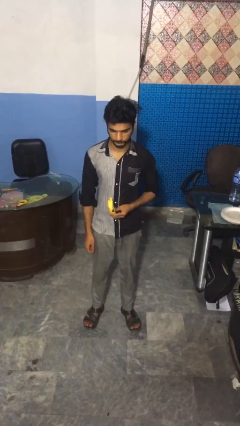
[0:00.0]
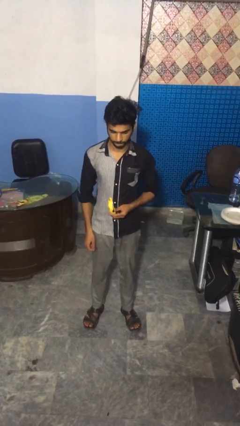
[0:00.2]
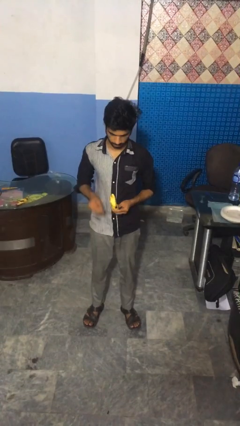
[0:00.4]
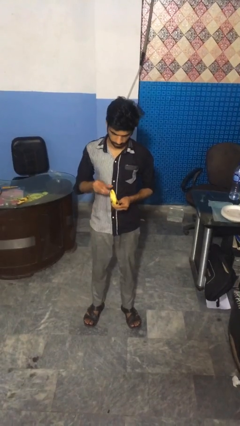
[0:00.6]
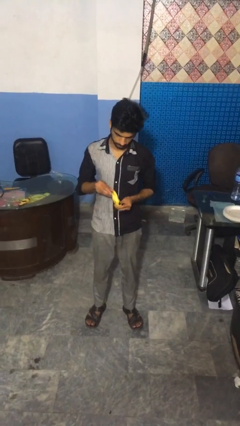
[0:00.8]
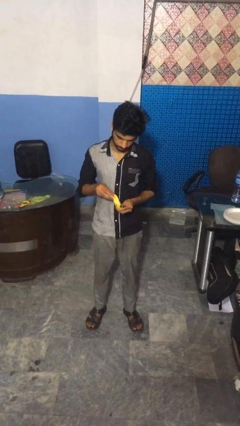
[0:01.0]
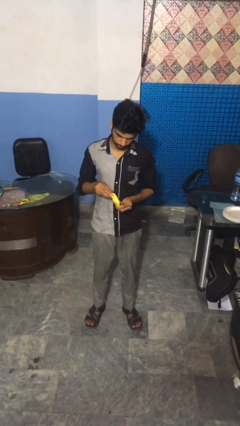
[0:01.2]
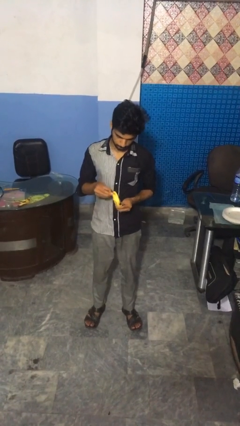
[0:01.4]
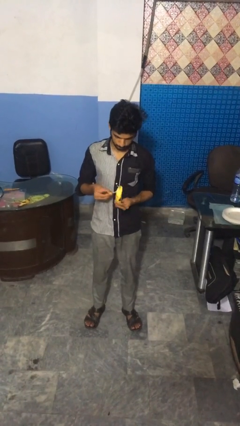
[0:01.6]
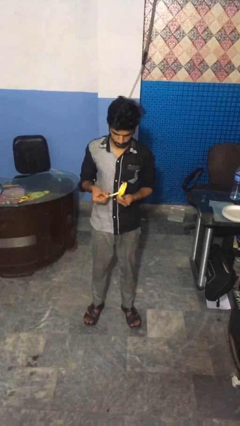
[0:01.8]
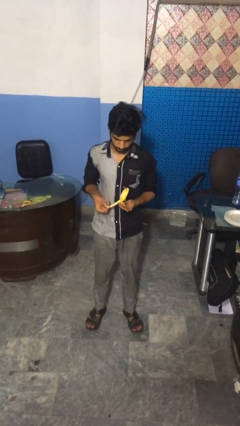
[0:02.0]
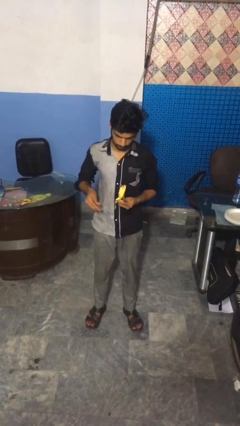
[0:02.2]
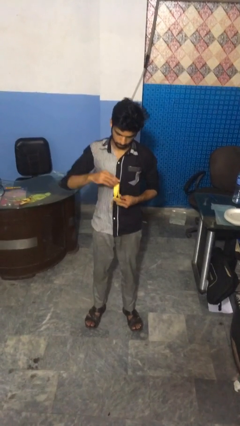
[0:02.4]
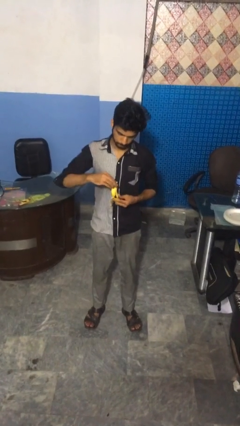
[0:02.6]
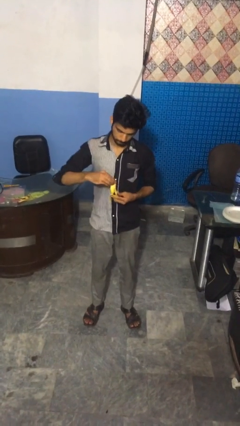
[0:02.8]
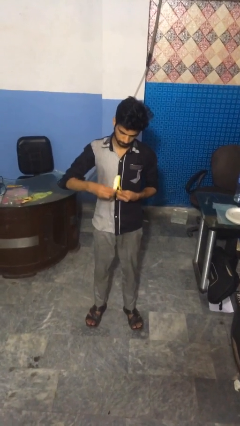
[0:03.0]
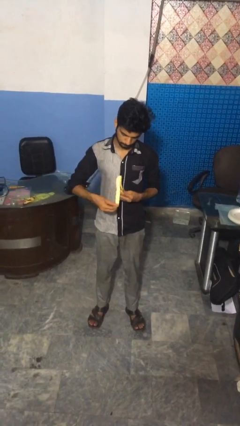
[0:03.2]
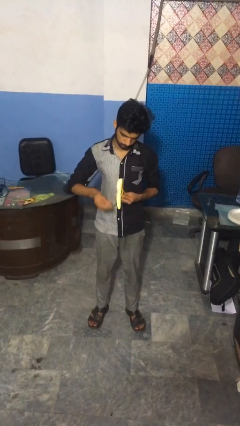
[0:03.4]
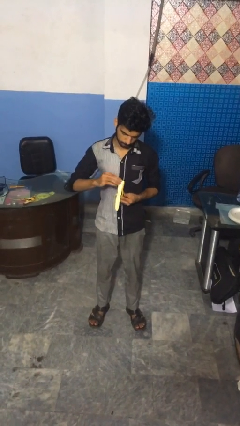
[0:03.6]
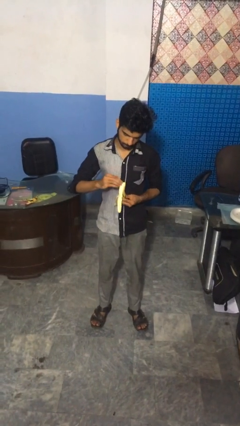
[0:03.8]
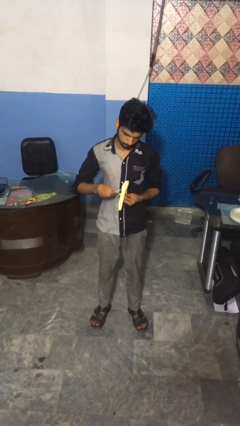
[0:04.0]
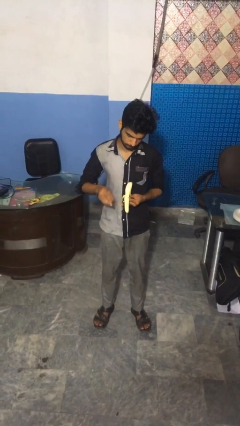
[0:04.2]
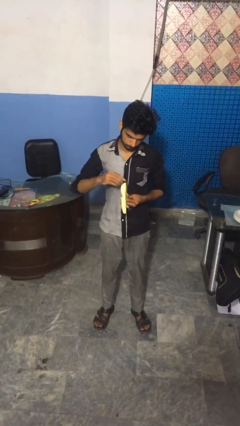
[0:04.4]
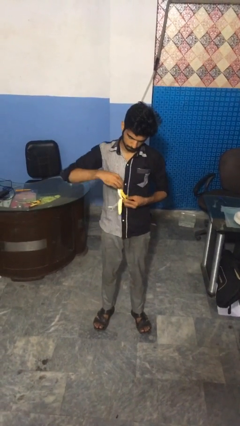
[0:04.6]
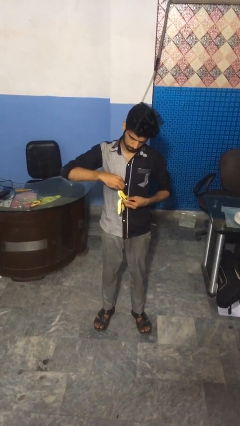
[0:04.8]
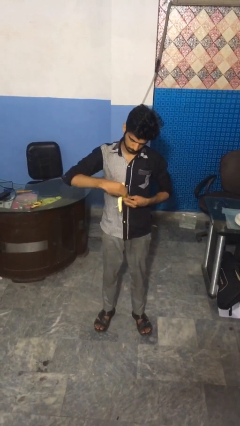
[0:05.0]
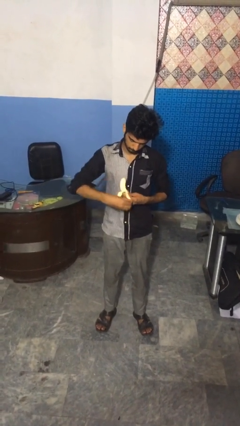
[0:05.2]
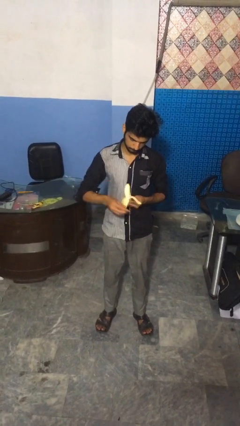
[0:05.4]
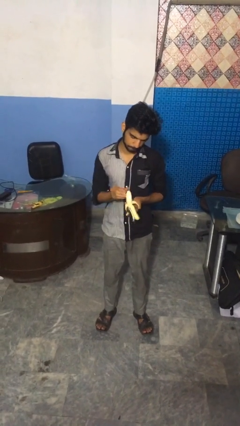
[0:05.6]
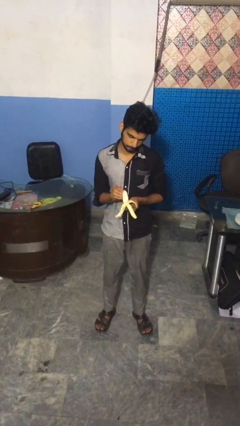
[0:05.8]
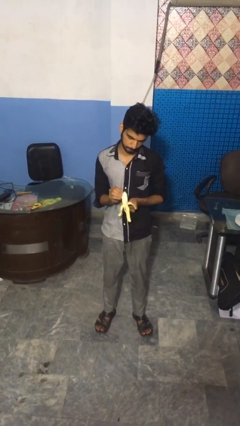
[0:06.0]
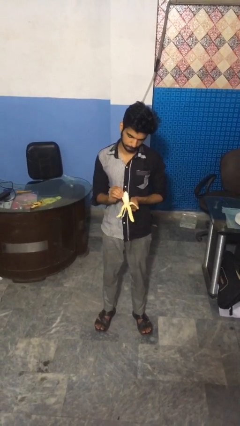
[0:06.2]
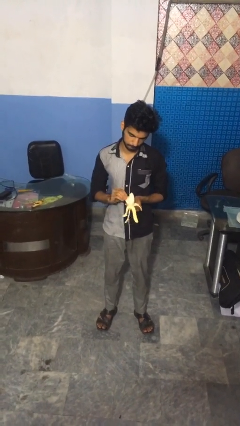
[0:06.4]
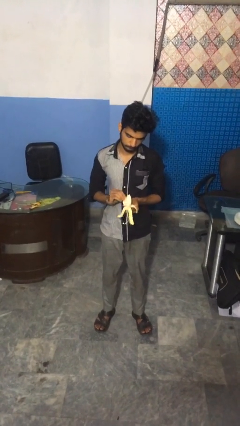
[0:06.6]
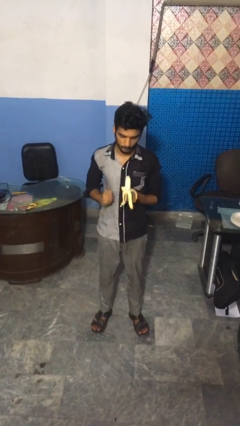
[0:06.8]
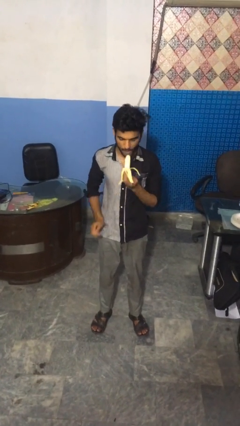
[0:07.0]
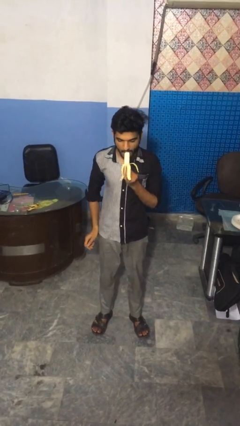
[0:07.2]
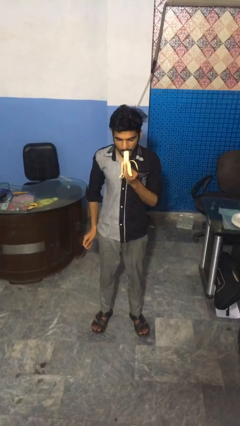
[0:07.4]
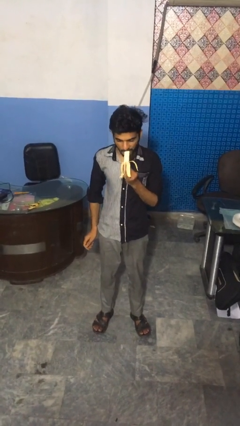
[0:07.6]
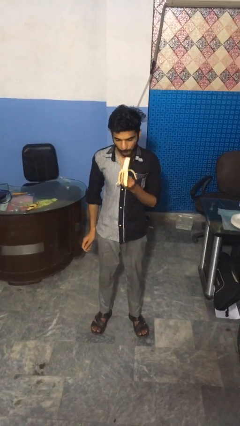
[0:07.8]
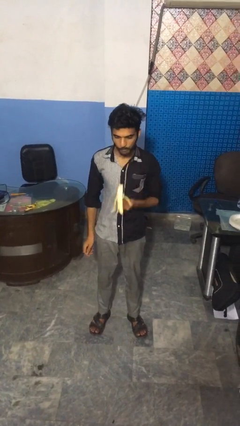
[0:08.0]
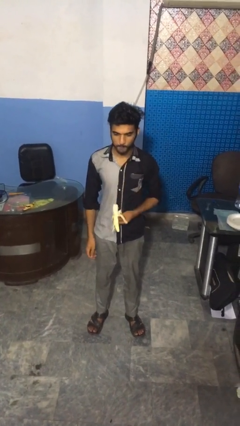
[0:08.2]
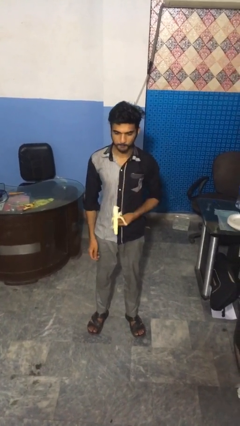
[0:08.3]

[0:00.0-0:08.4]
person eats banana

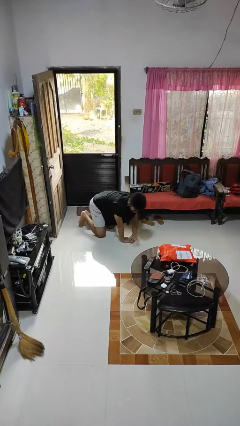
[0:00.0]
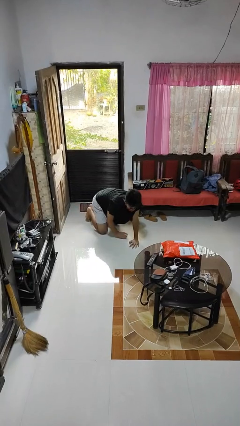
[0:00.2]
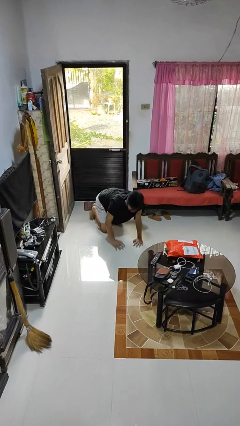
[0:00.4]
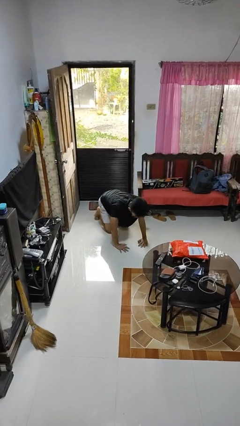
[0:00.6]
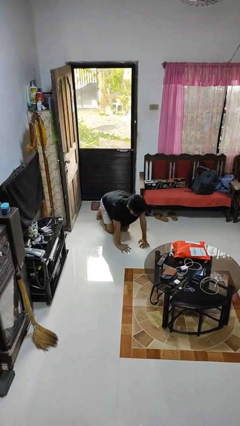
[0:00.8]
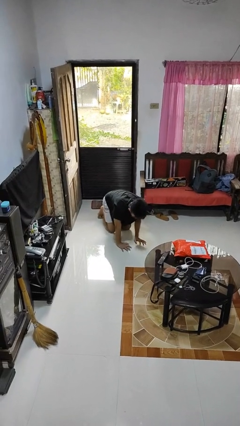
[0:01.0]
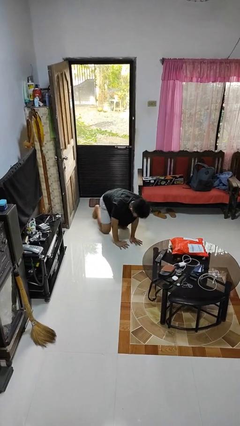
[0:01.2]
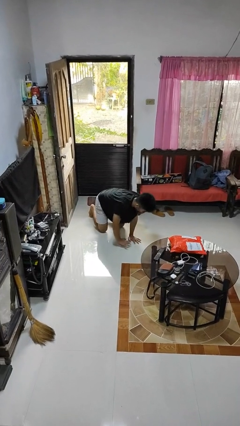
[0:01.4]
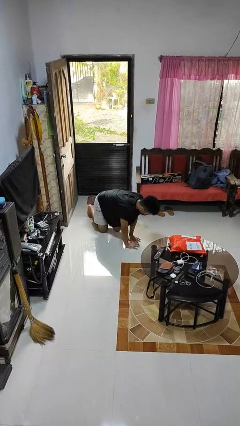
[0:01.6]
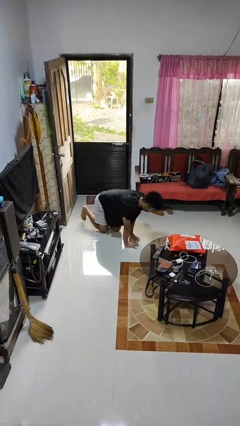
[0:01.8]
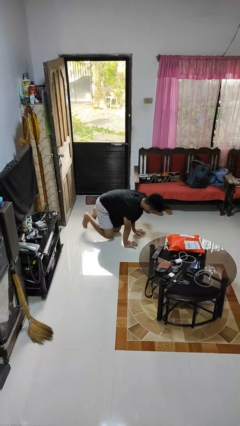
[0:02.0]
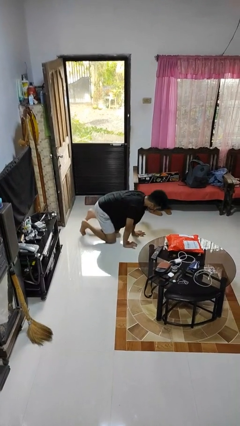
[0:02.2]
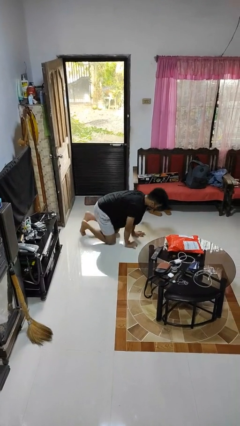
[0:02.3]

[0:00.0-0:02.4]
person crawls

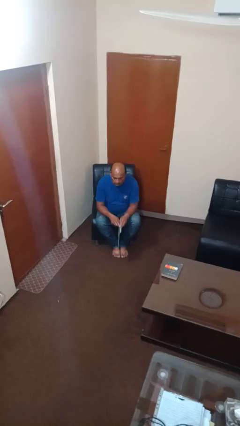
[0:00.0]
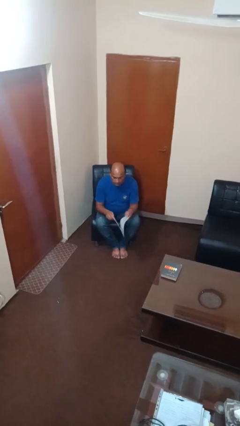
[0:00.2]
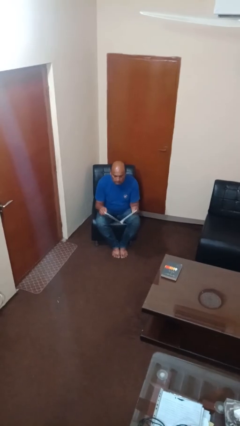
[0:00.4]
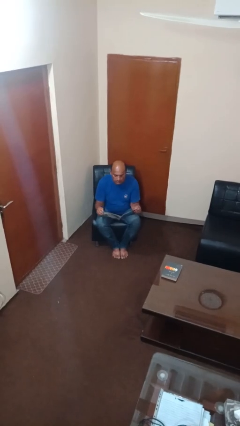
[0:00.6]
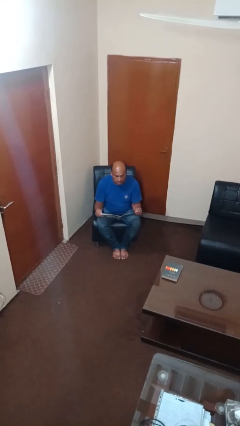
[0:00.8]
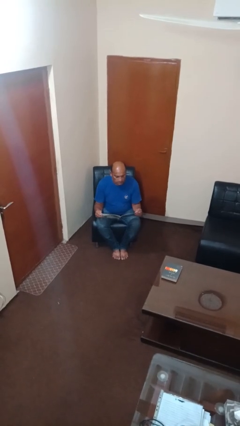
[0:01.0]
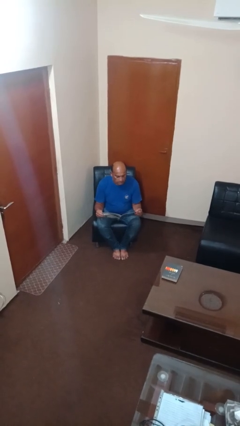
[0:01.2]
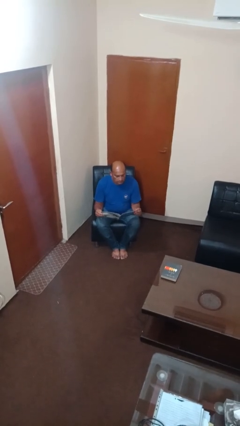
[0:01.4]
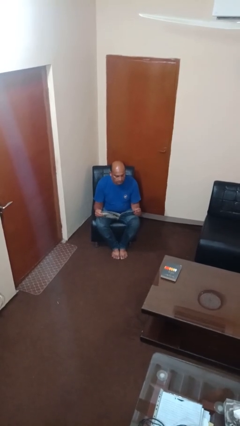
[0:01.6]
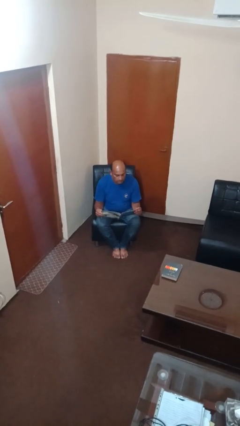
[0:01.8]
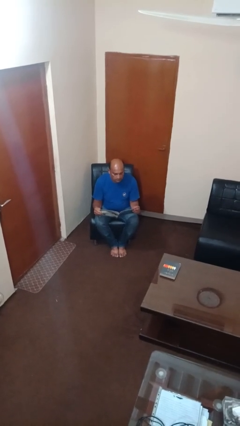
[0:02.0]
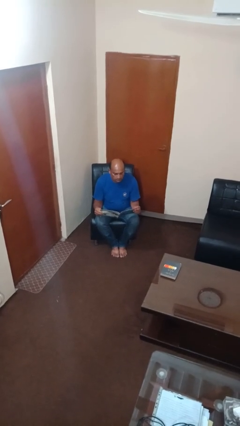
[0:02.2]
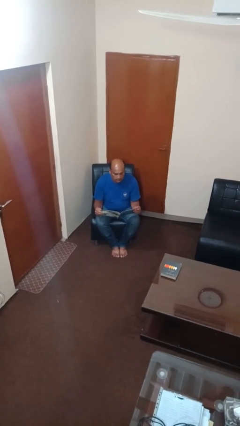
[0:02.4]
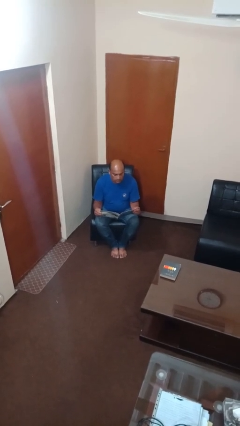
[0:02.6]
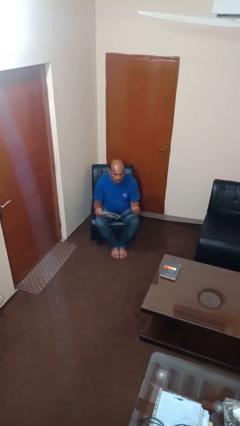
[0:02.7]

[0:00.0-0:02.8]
person reads magazine

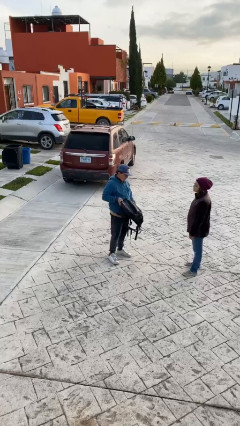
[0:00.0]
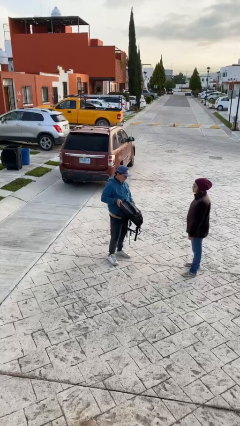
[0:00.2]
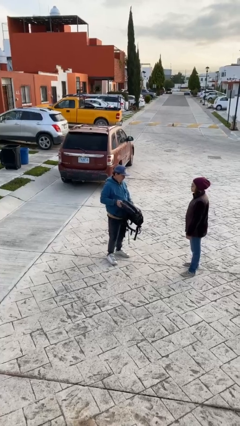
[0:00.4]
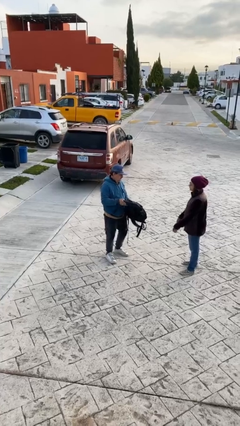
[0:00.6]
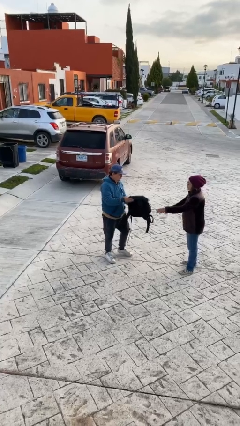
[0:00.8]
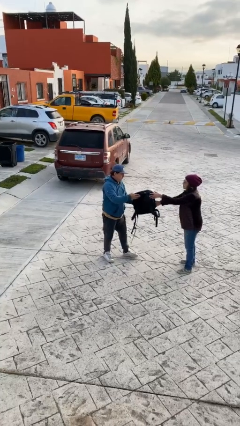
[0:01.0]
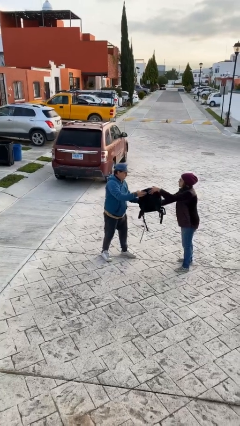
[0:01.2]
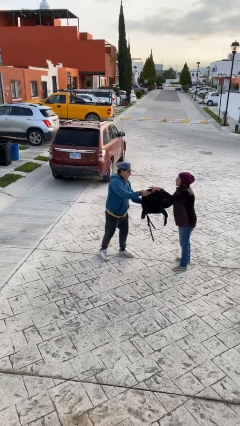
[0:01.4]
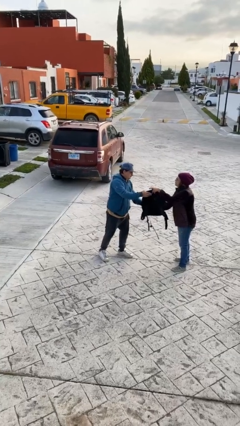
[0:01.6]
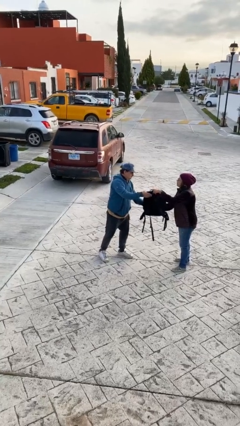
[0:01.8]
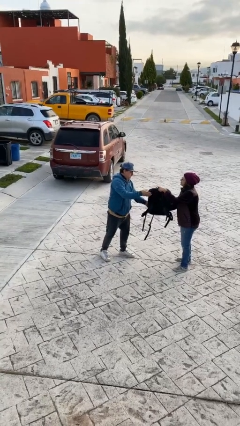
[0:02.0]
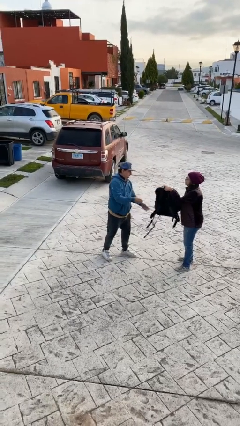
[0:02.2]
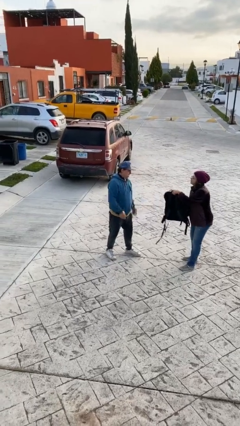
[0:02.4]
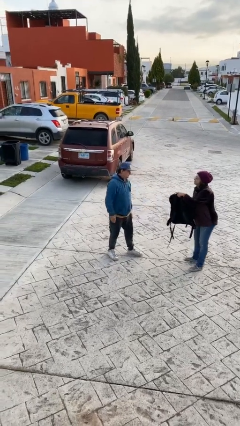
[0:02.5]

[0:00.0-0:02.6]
person transfers object to person

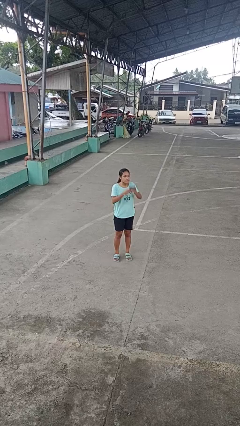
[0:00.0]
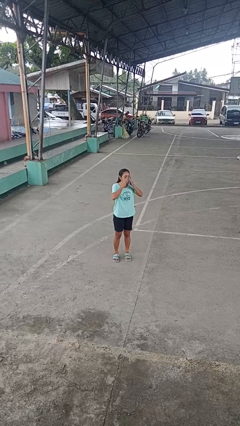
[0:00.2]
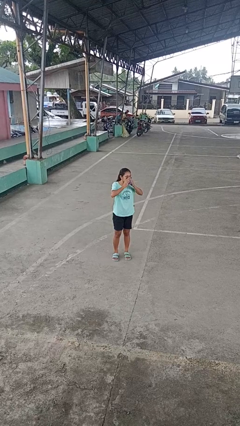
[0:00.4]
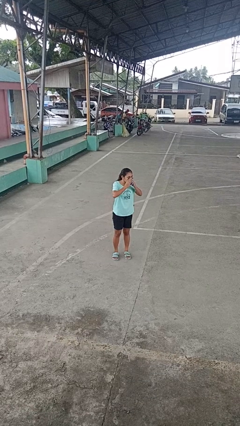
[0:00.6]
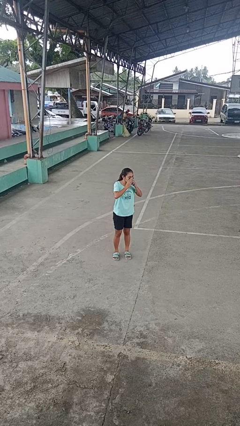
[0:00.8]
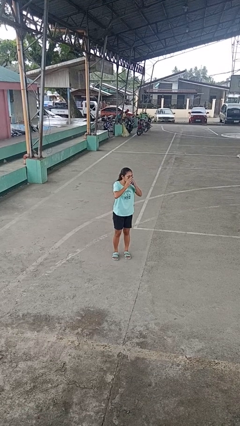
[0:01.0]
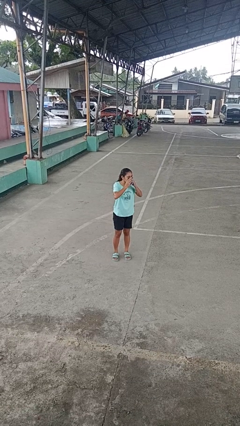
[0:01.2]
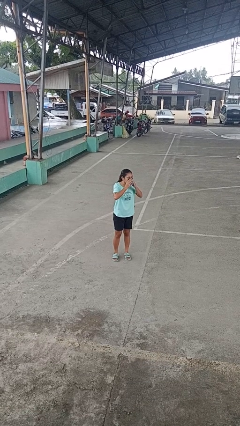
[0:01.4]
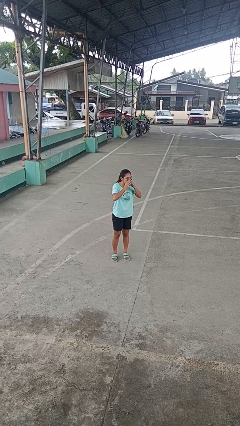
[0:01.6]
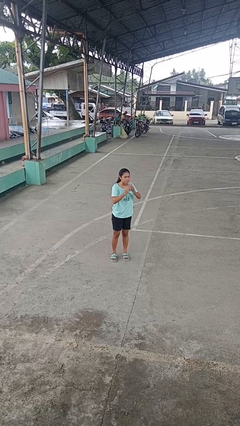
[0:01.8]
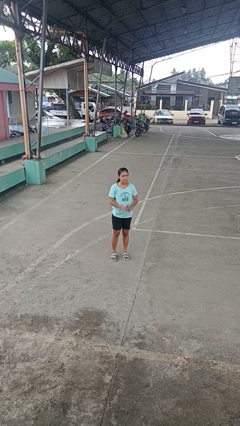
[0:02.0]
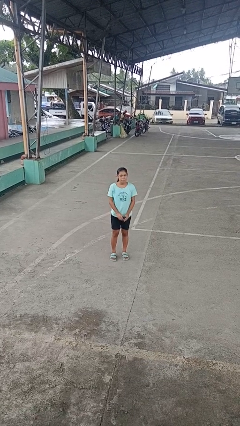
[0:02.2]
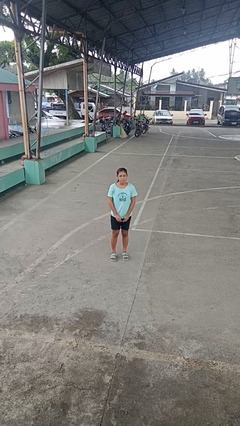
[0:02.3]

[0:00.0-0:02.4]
person blows nose
